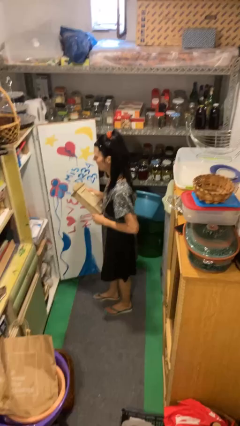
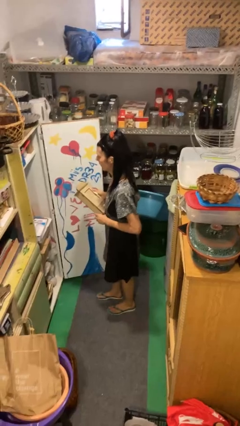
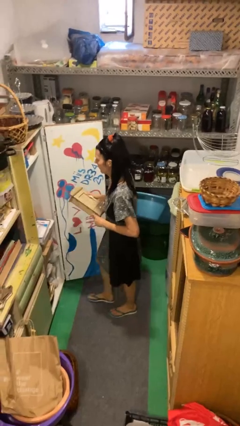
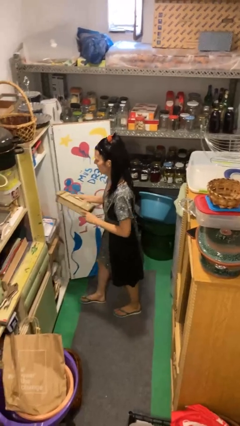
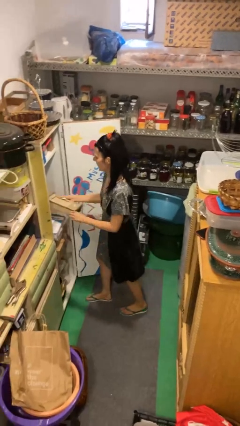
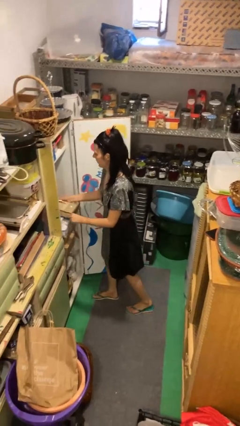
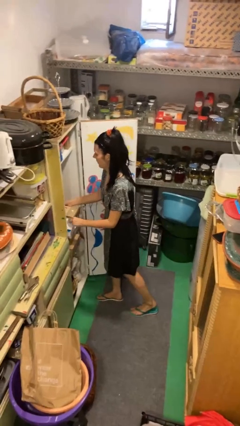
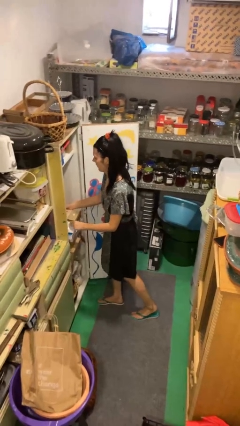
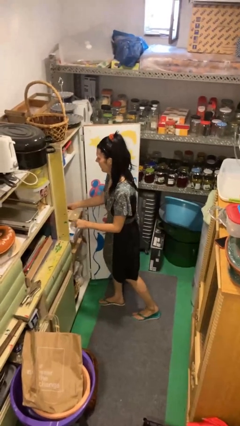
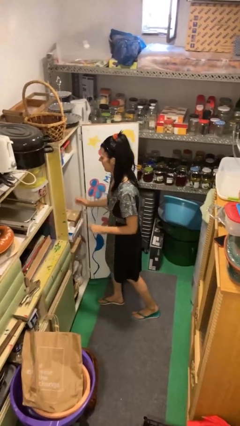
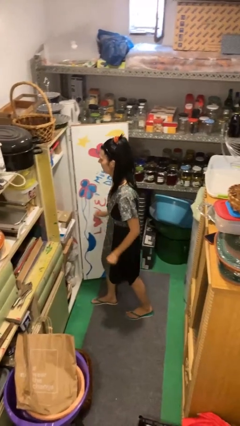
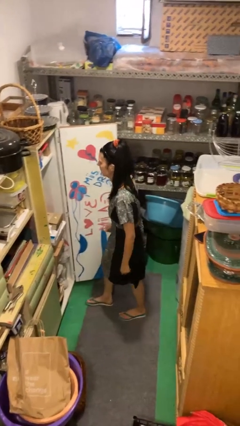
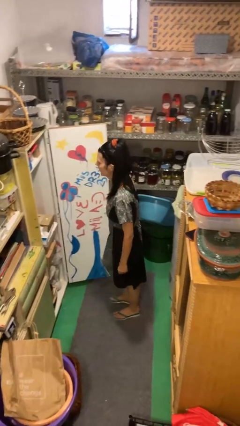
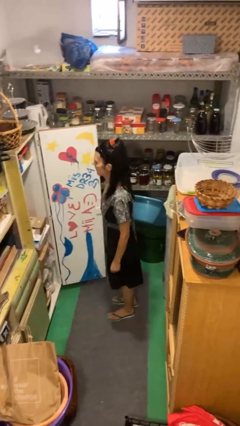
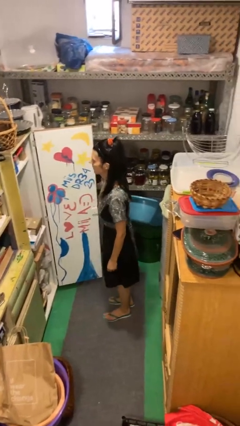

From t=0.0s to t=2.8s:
person puts down object into cabinet

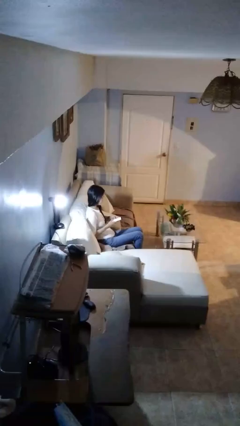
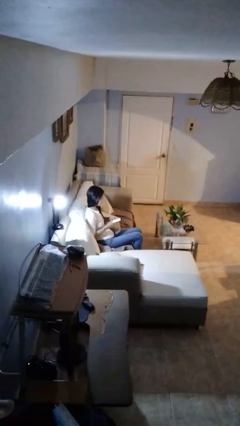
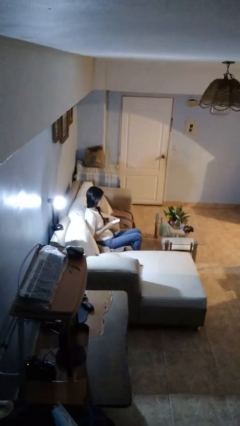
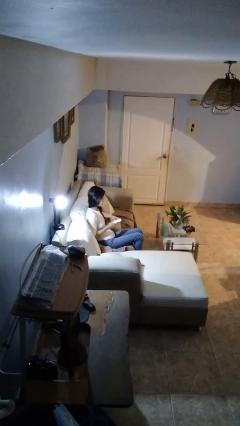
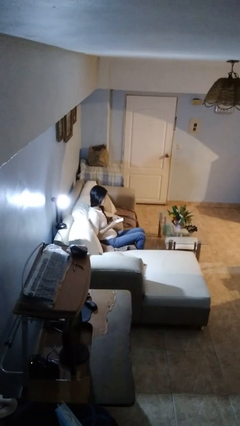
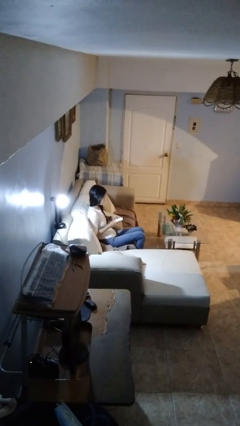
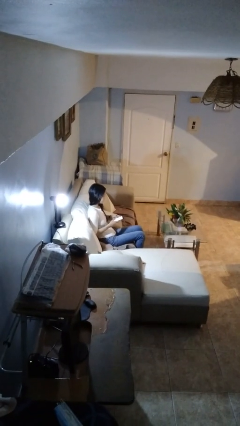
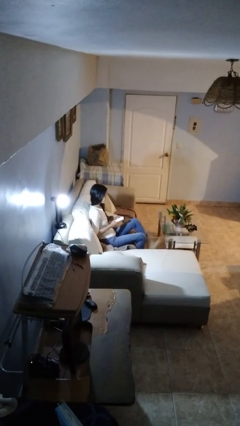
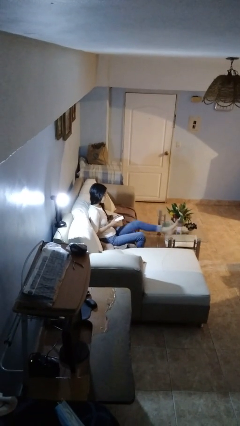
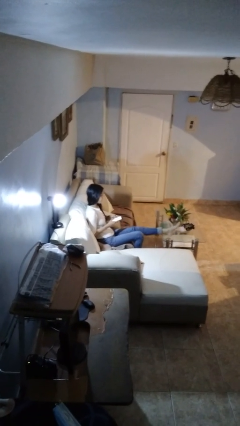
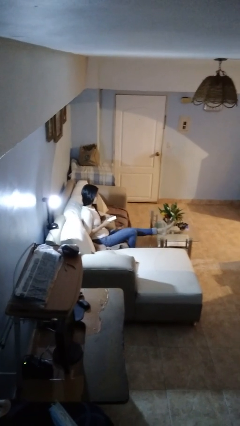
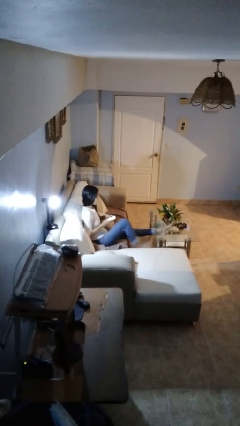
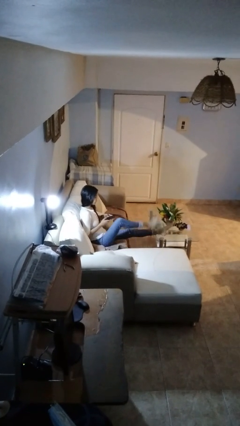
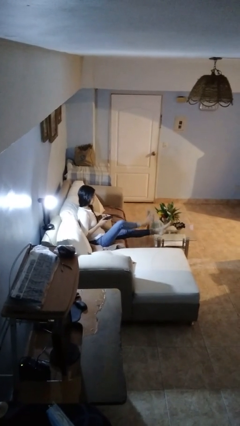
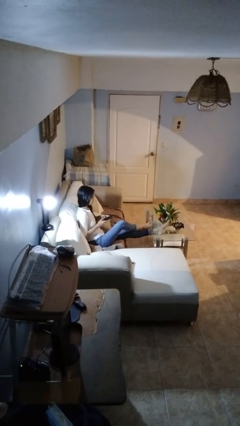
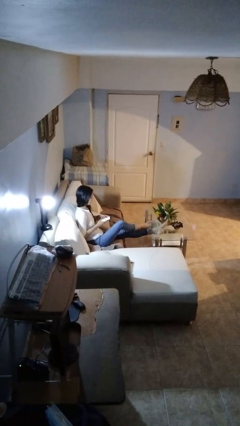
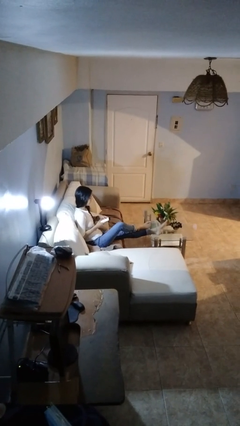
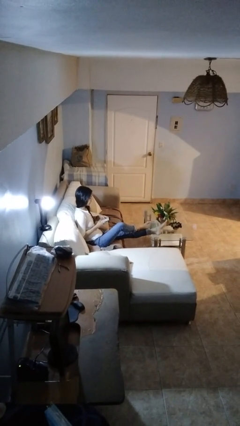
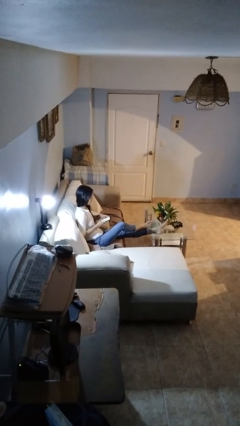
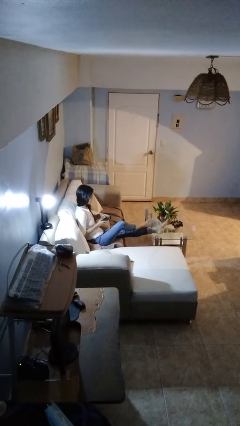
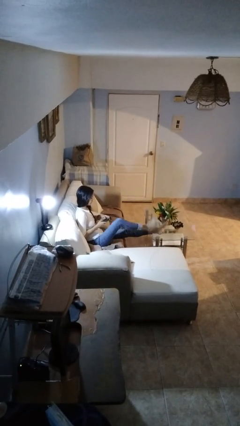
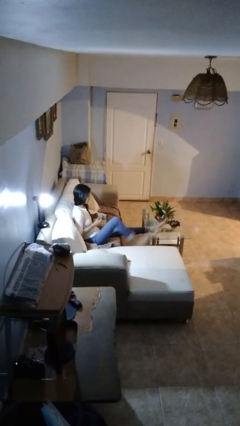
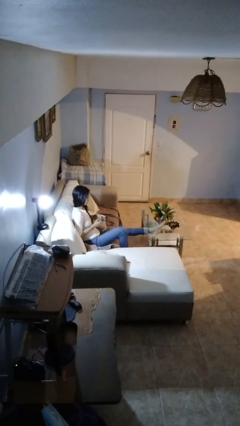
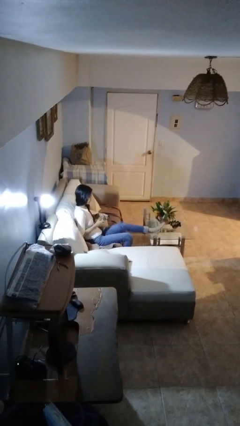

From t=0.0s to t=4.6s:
person puts feet up

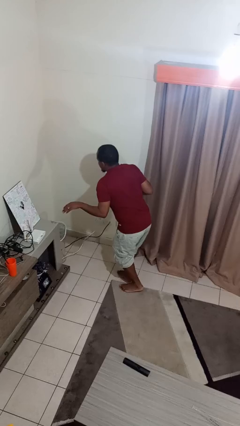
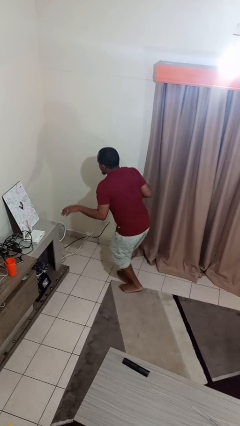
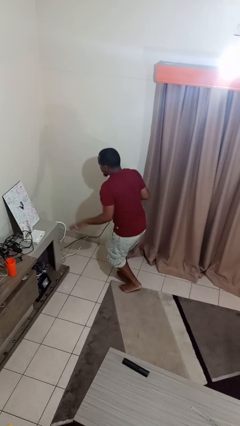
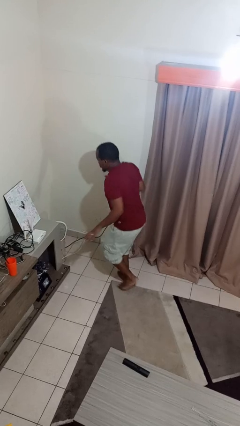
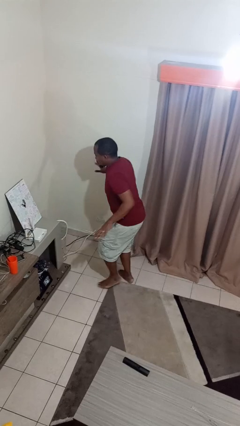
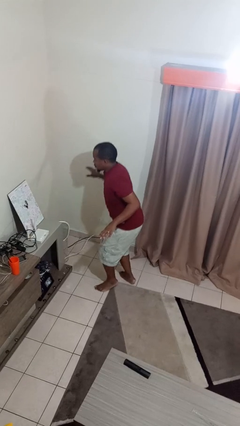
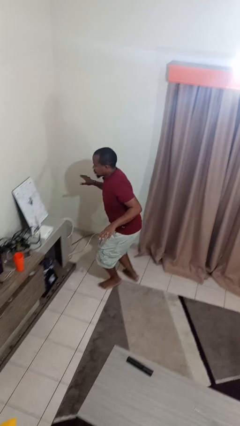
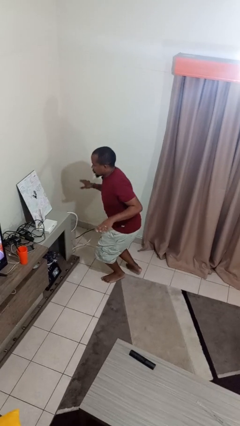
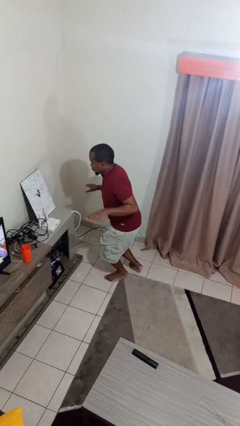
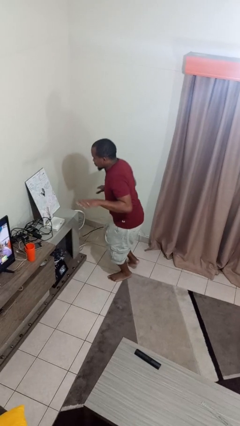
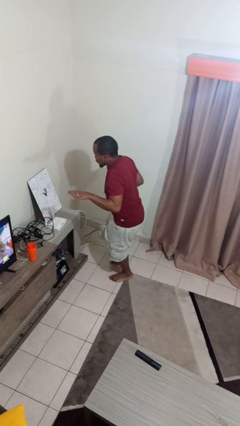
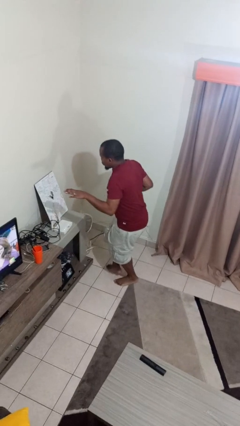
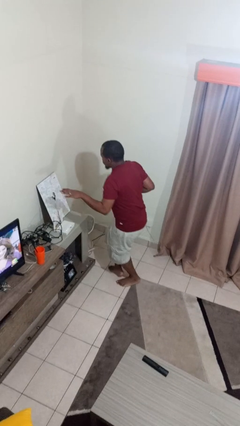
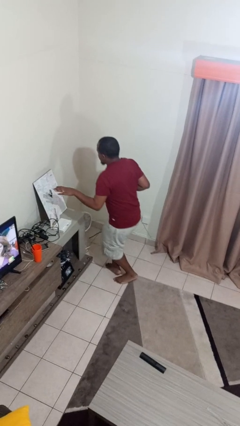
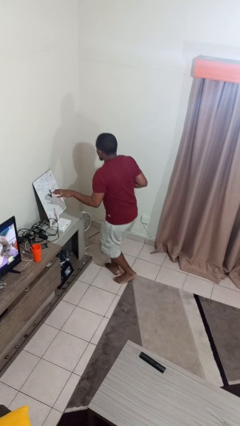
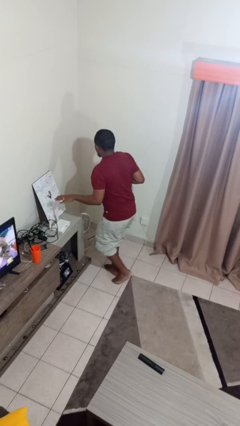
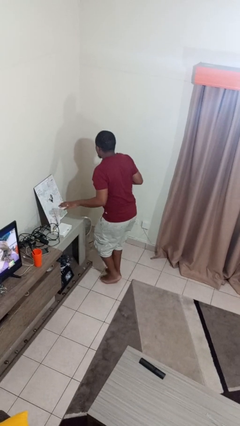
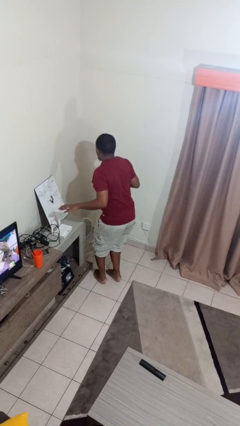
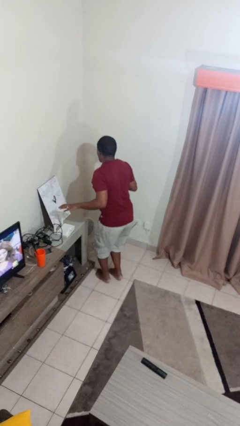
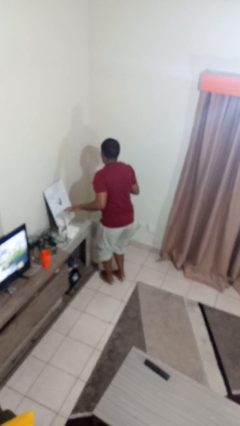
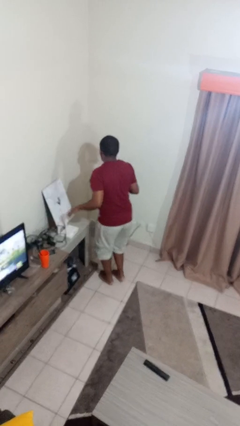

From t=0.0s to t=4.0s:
person walks tiptoe

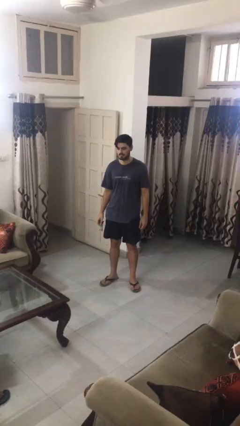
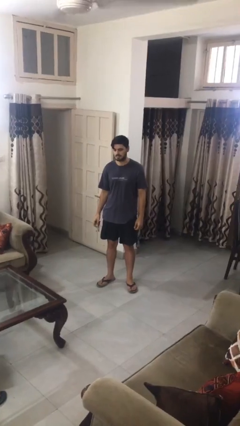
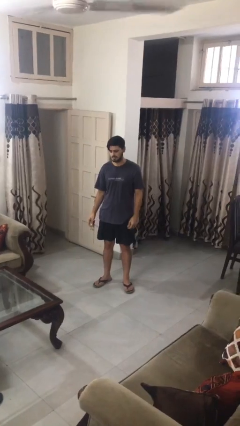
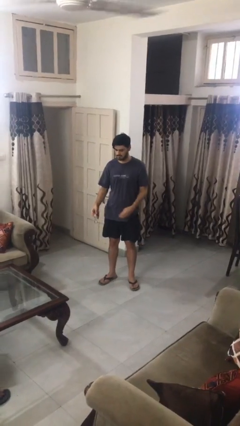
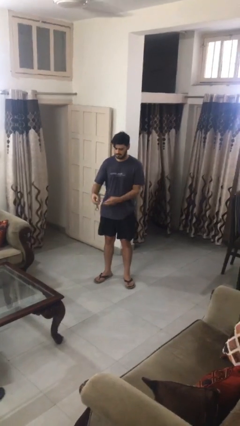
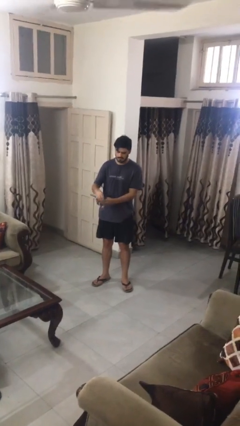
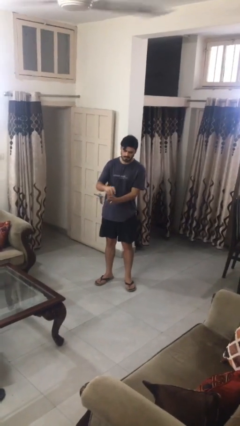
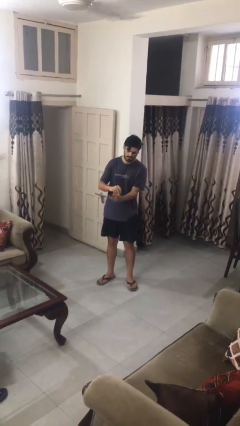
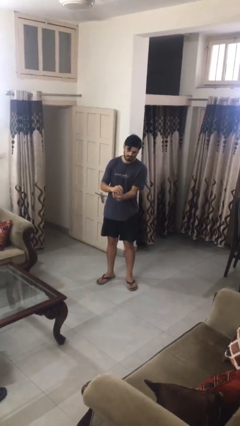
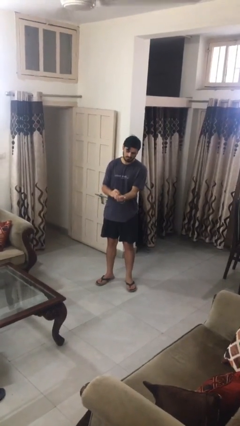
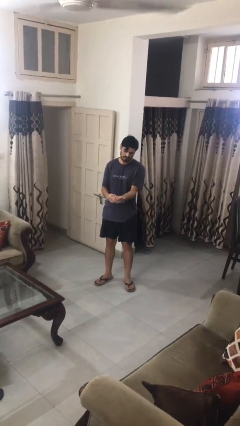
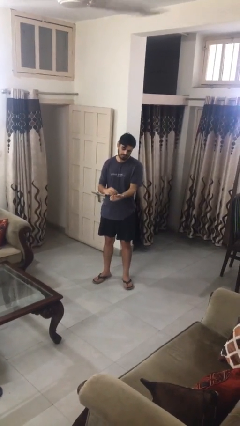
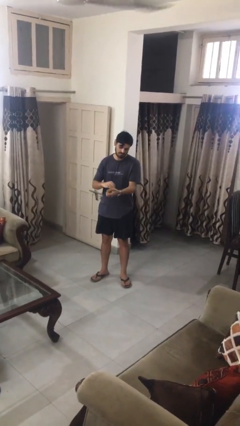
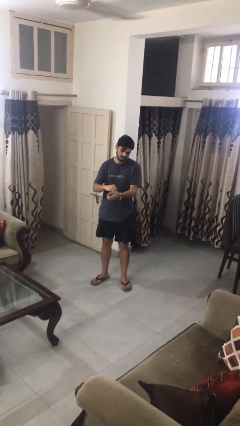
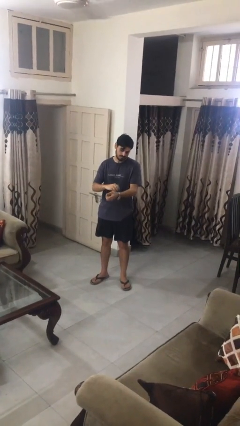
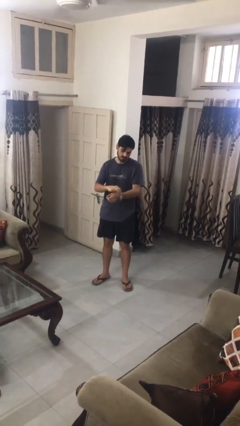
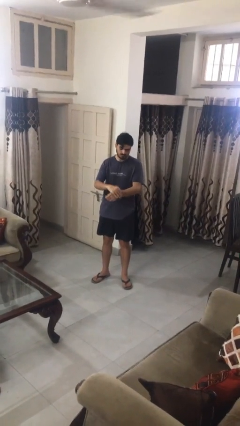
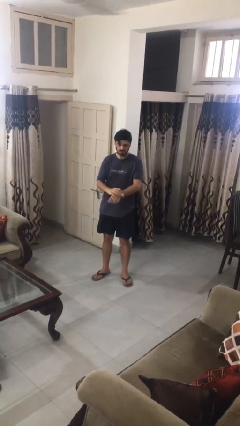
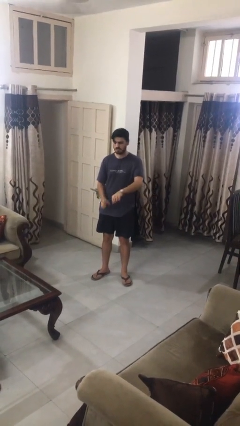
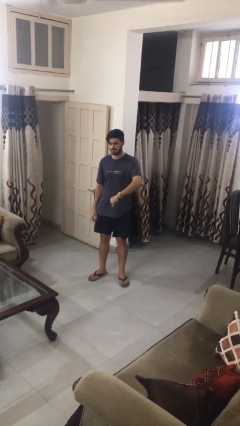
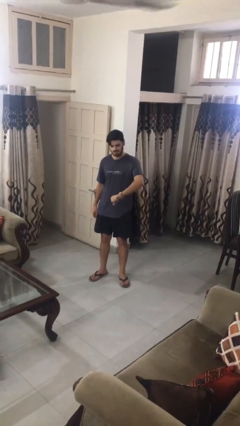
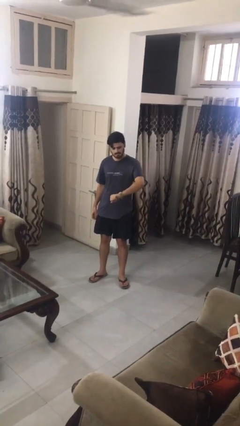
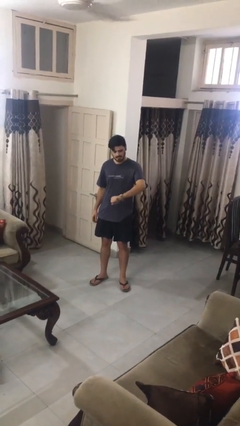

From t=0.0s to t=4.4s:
person puts on wristwatch

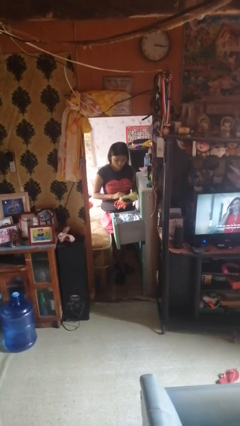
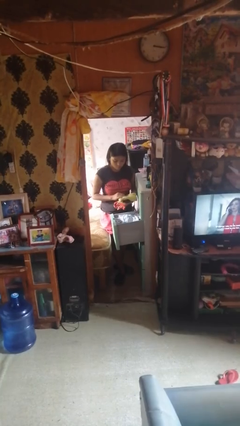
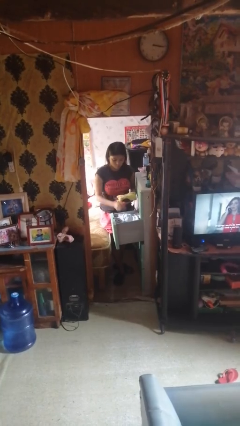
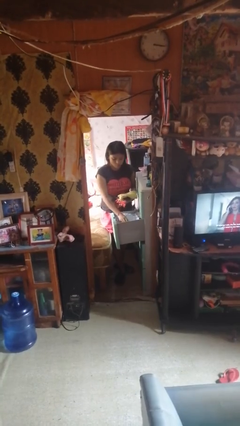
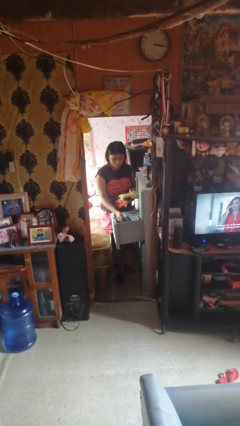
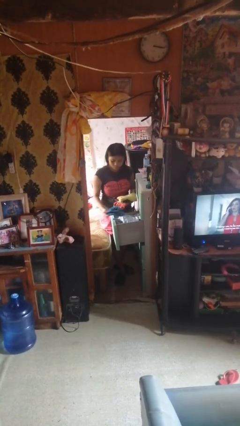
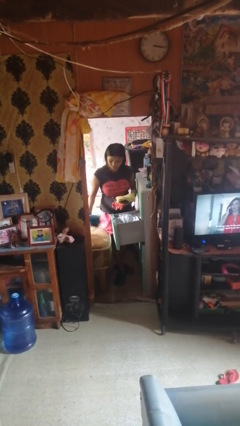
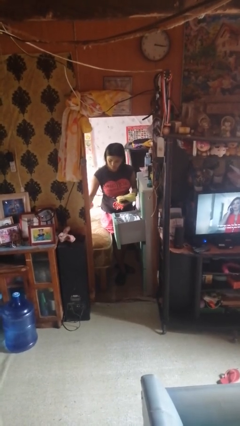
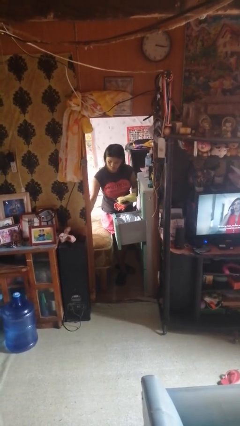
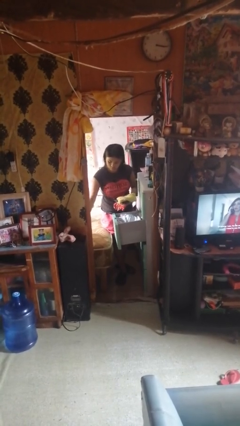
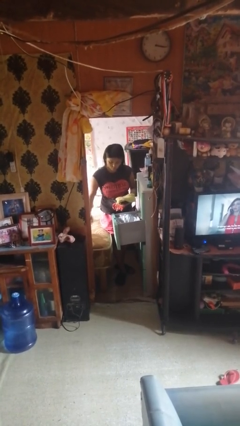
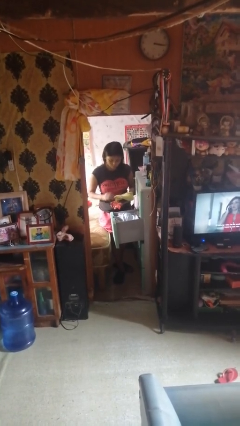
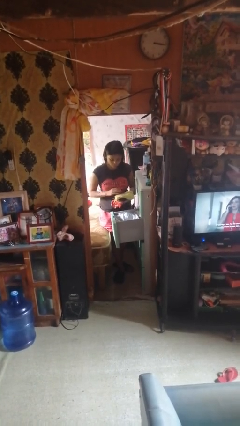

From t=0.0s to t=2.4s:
person takes clothes from dresser
